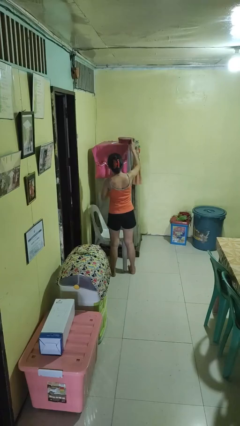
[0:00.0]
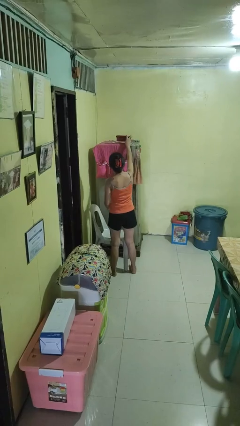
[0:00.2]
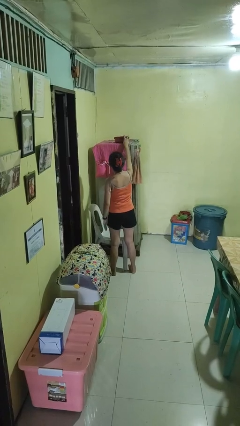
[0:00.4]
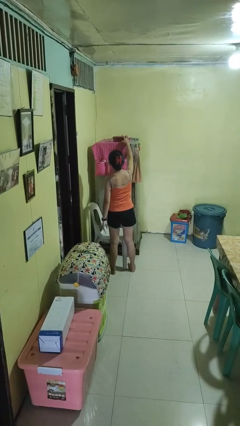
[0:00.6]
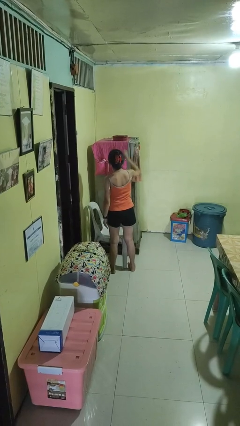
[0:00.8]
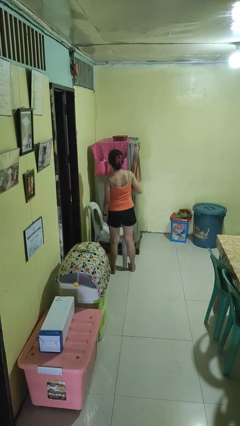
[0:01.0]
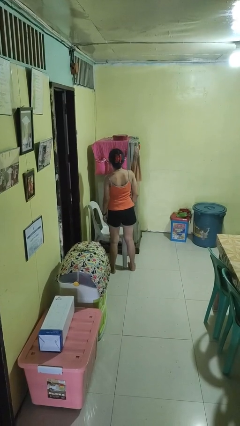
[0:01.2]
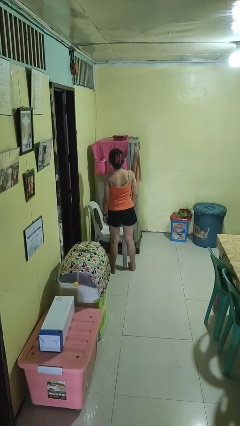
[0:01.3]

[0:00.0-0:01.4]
person puts down object on shelf

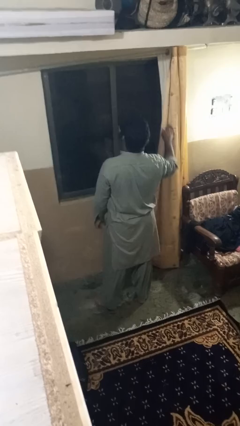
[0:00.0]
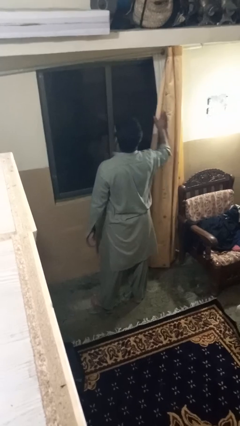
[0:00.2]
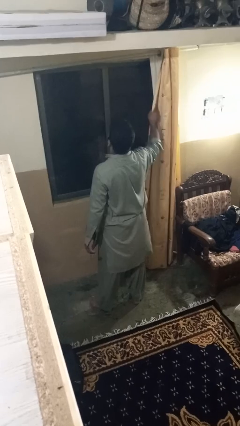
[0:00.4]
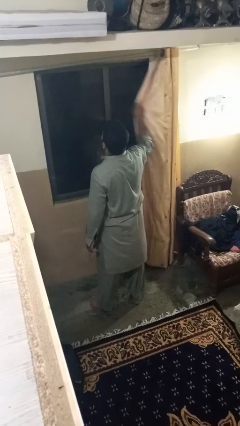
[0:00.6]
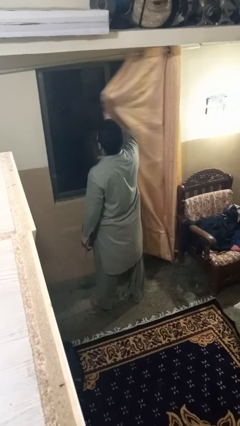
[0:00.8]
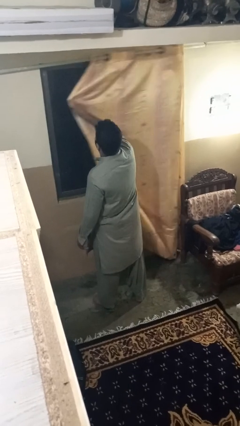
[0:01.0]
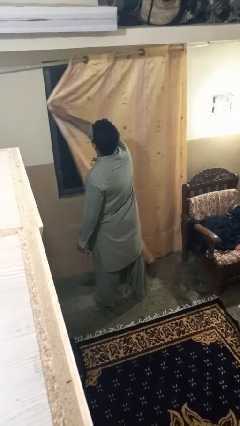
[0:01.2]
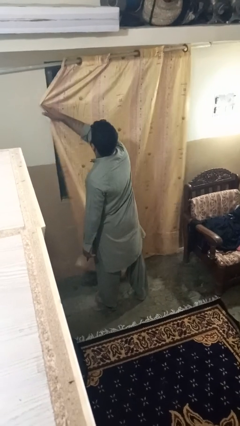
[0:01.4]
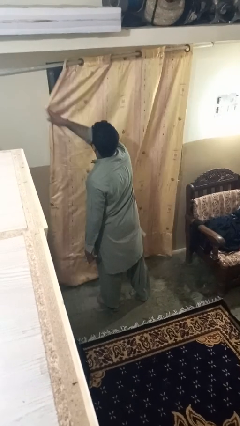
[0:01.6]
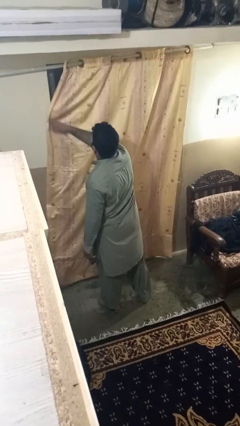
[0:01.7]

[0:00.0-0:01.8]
person closes curtains

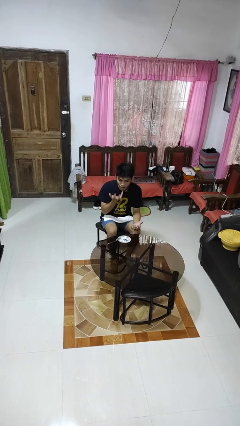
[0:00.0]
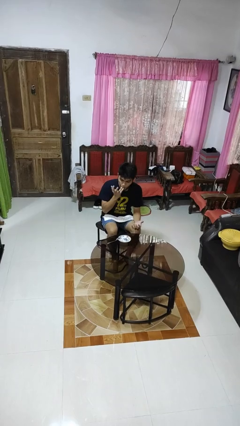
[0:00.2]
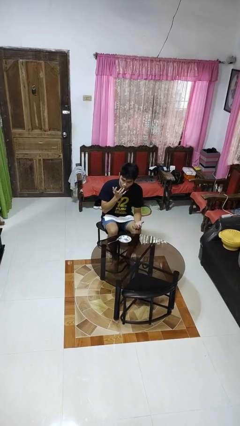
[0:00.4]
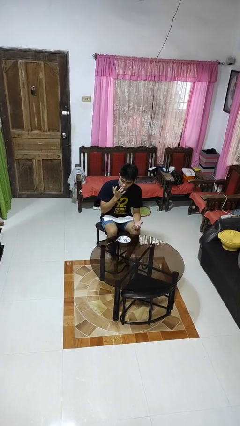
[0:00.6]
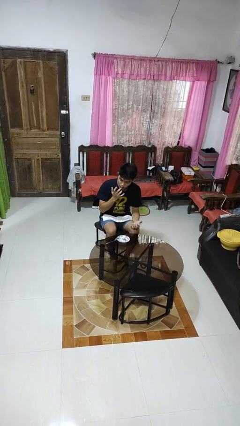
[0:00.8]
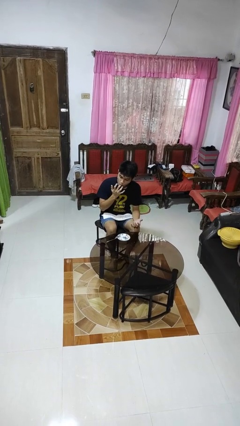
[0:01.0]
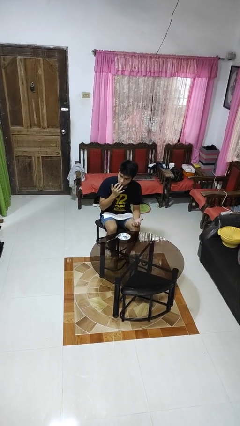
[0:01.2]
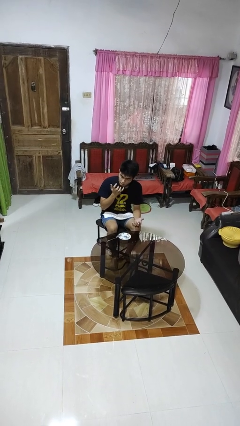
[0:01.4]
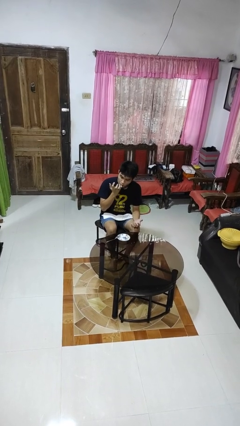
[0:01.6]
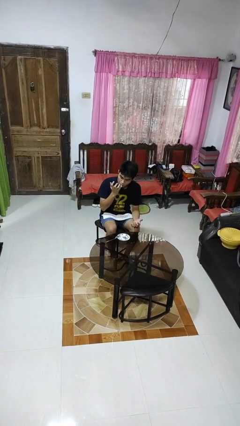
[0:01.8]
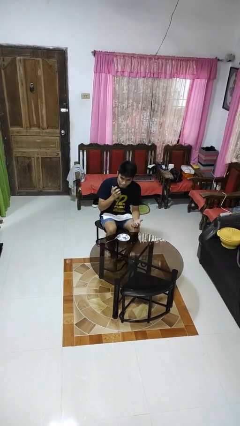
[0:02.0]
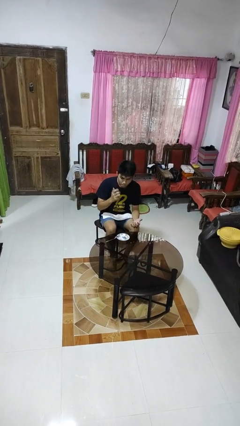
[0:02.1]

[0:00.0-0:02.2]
person licks fingers

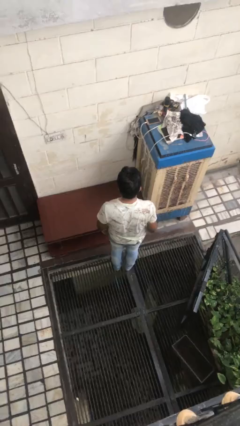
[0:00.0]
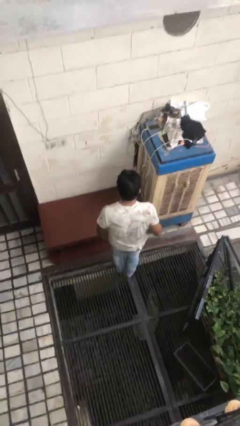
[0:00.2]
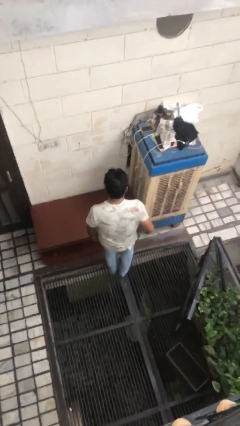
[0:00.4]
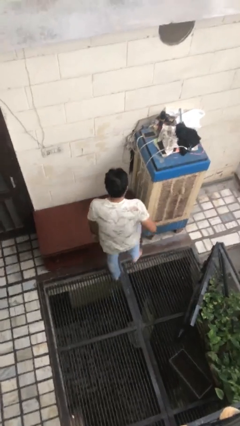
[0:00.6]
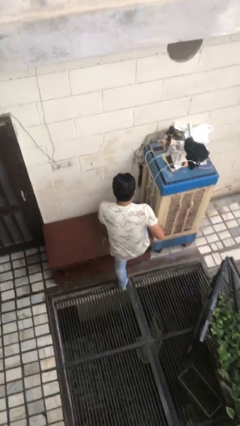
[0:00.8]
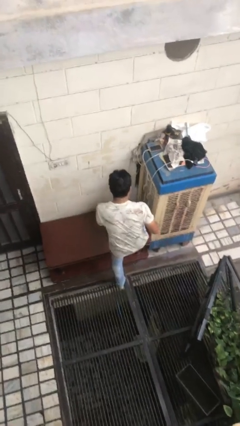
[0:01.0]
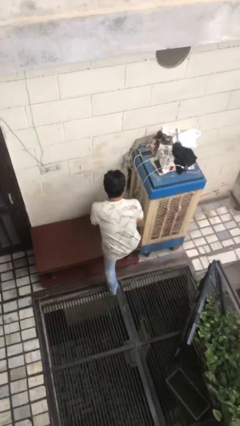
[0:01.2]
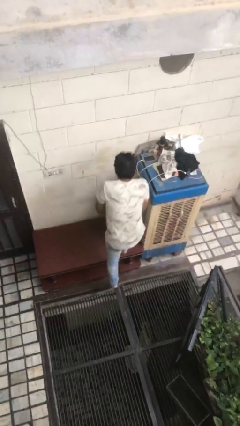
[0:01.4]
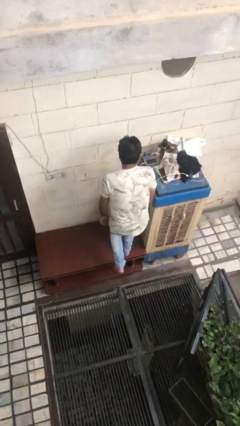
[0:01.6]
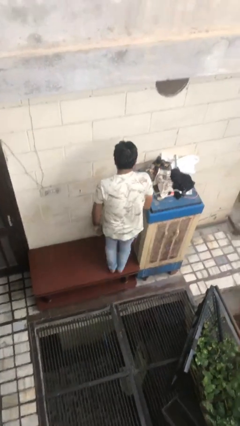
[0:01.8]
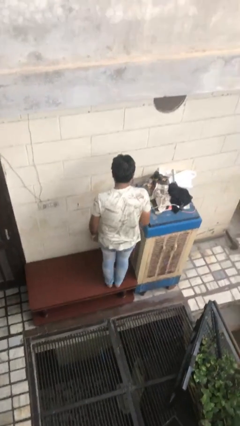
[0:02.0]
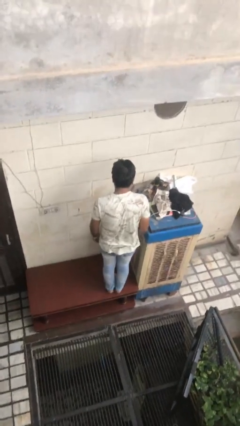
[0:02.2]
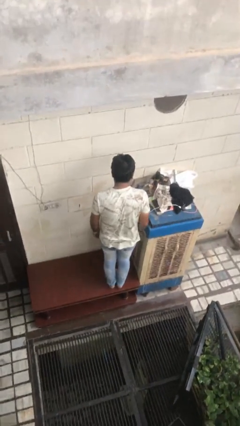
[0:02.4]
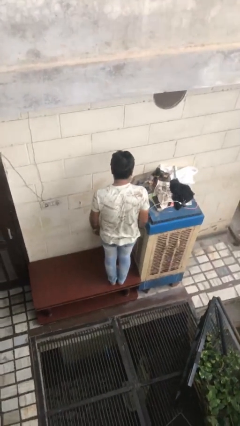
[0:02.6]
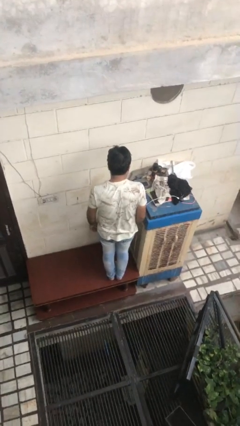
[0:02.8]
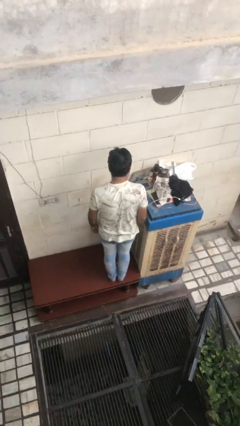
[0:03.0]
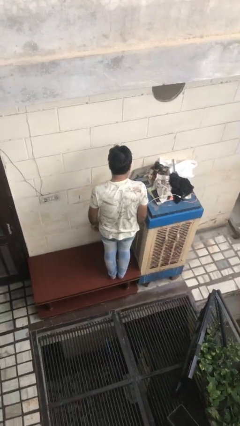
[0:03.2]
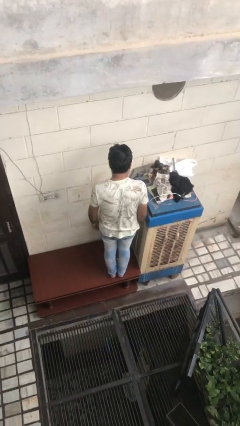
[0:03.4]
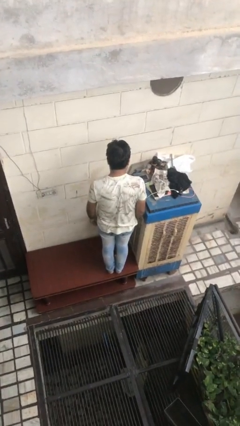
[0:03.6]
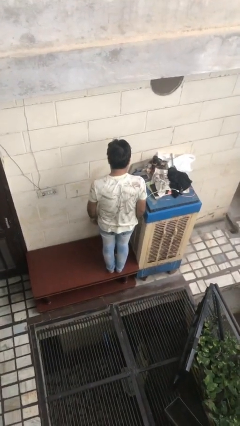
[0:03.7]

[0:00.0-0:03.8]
person climbs on table

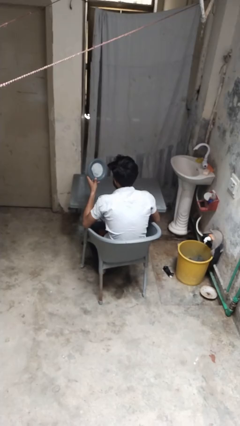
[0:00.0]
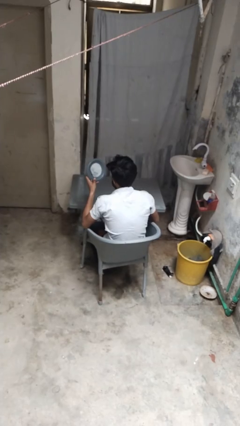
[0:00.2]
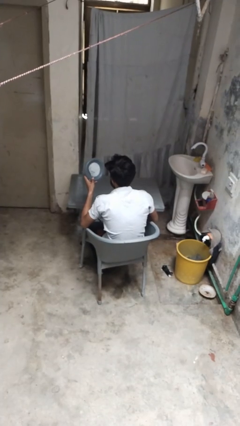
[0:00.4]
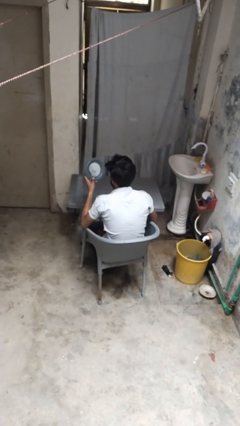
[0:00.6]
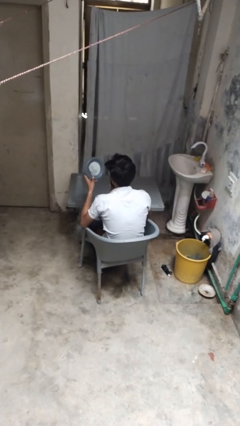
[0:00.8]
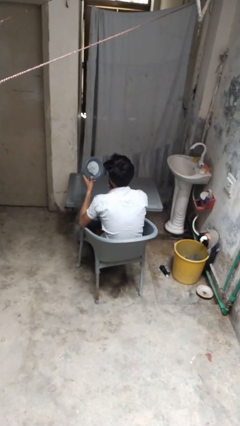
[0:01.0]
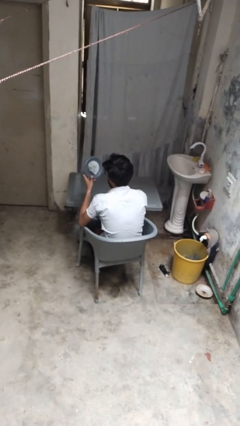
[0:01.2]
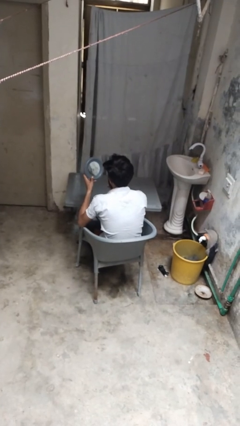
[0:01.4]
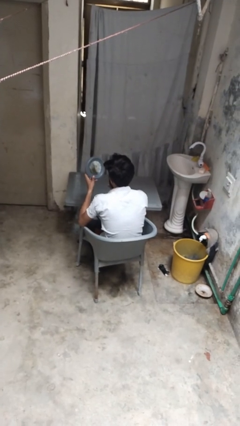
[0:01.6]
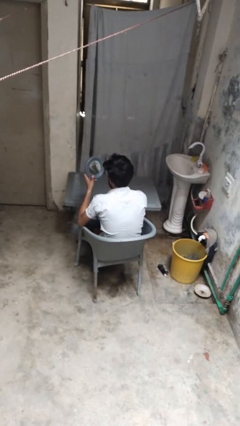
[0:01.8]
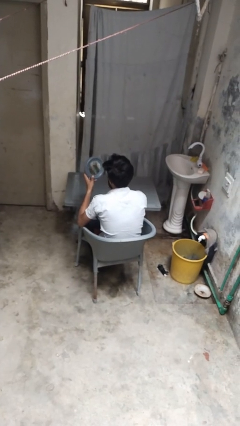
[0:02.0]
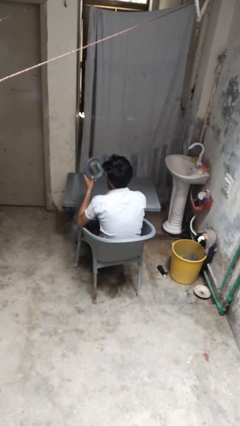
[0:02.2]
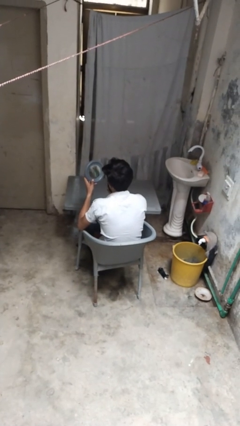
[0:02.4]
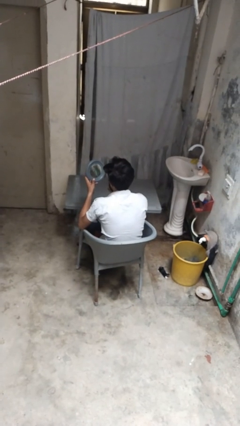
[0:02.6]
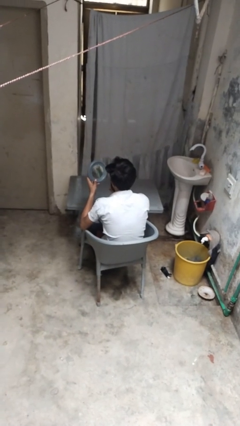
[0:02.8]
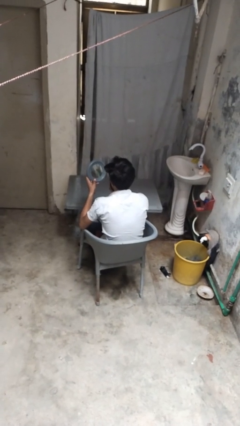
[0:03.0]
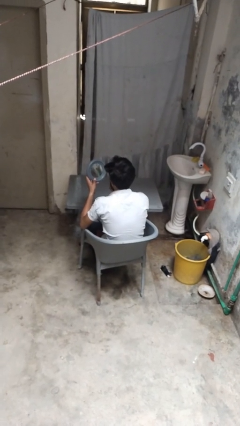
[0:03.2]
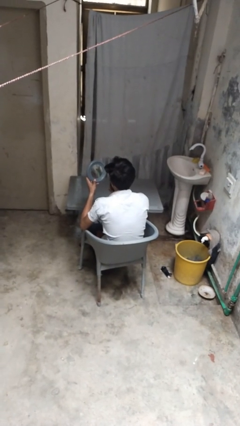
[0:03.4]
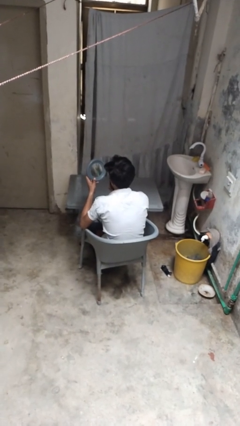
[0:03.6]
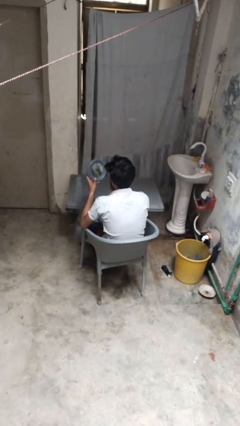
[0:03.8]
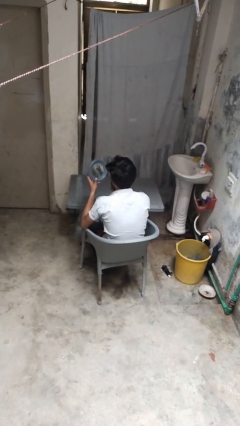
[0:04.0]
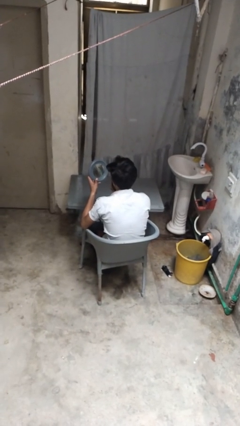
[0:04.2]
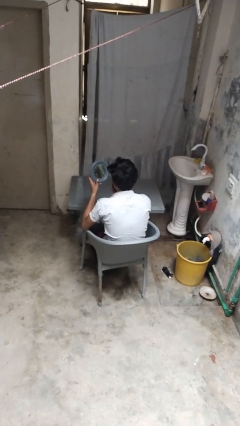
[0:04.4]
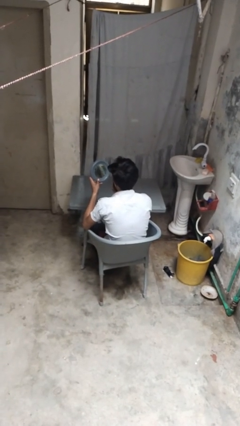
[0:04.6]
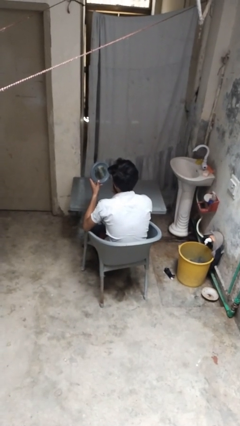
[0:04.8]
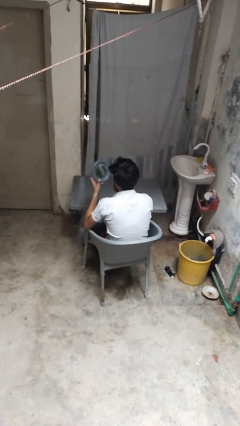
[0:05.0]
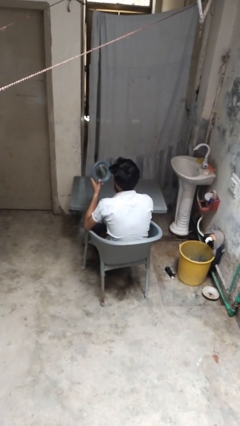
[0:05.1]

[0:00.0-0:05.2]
person applies lip makeup

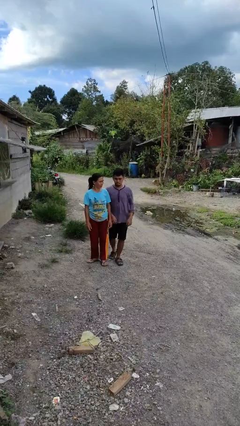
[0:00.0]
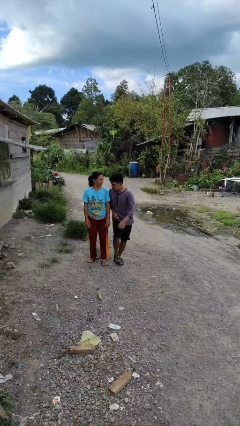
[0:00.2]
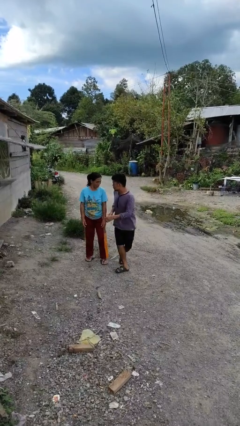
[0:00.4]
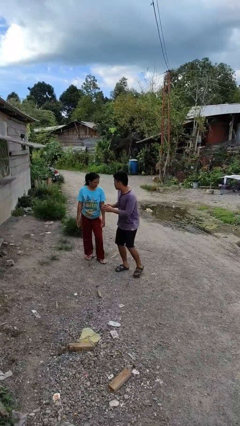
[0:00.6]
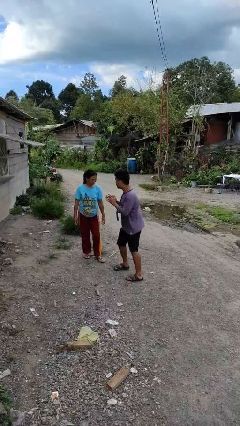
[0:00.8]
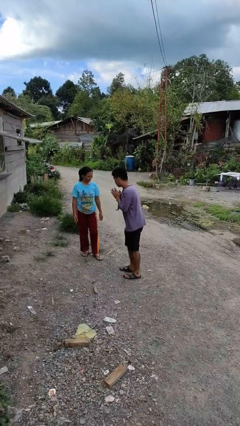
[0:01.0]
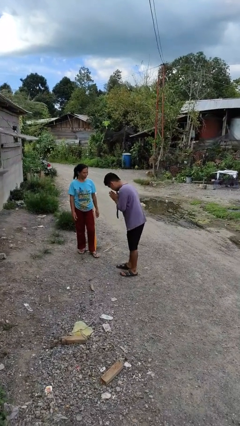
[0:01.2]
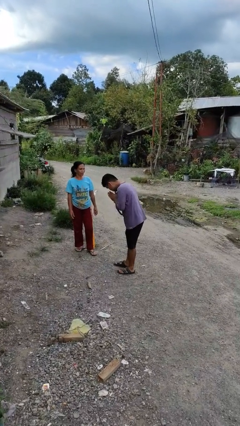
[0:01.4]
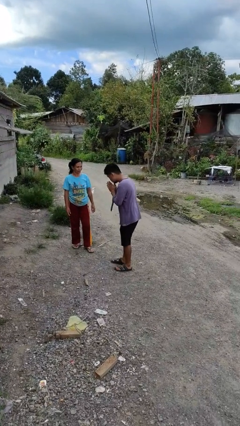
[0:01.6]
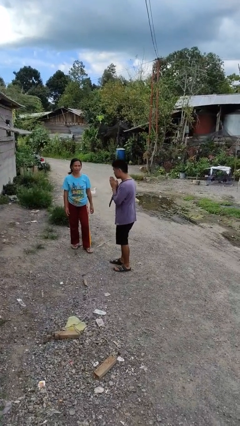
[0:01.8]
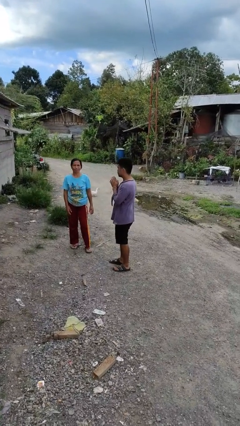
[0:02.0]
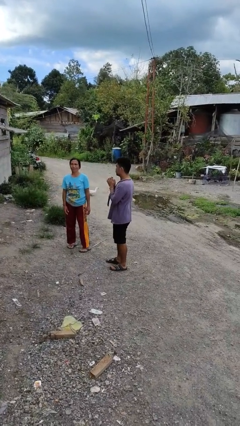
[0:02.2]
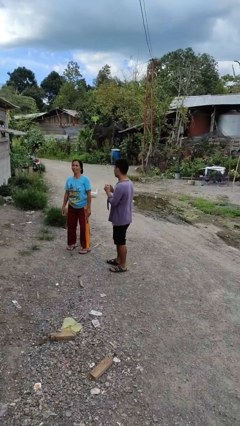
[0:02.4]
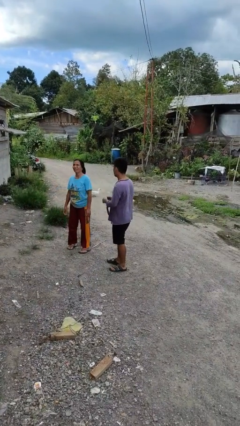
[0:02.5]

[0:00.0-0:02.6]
person bumps into person

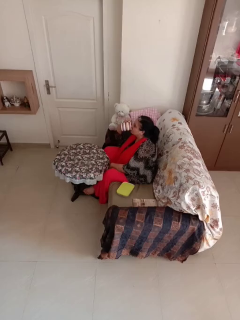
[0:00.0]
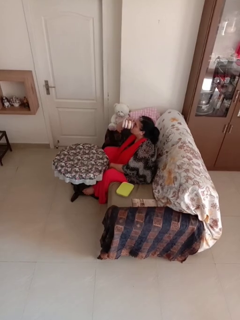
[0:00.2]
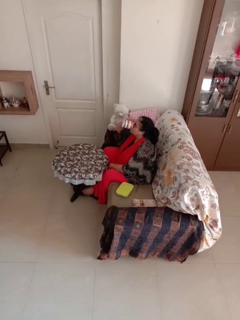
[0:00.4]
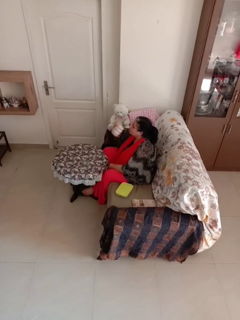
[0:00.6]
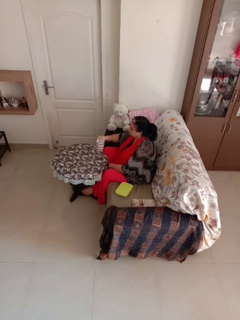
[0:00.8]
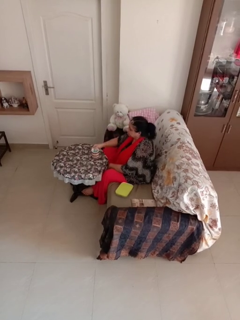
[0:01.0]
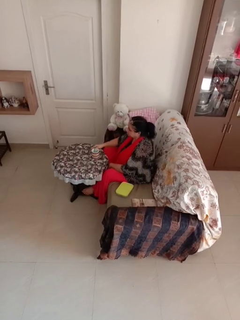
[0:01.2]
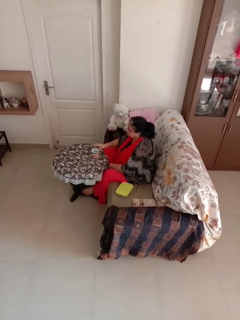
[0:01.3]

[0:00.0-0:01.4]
person drinks from mug
